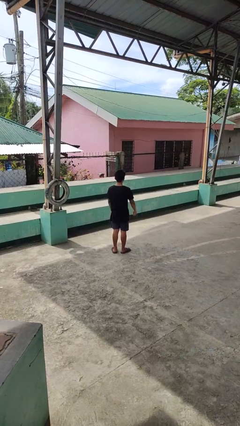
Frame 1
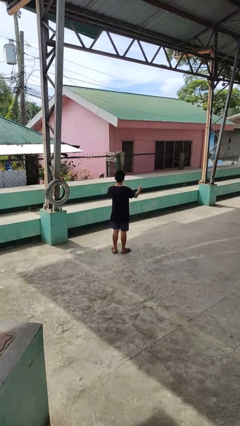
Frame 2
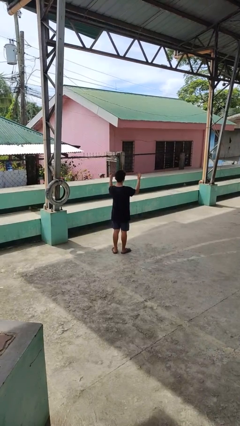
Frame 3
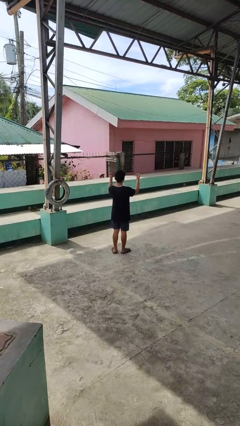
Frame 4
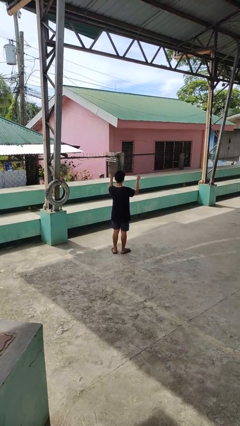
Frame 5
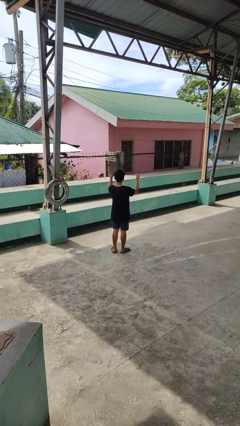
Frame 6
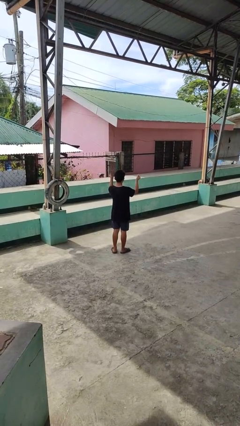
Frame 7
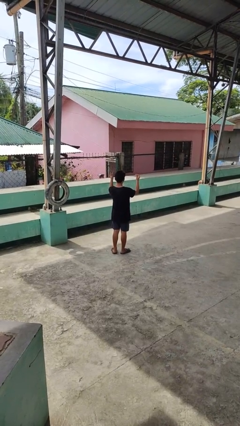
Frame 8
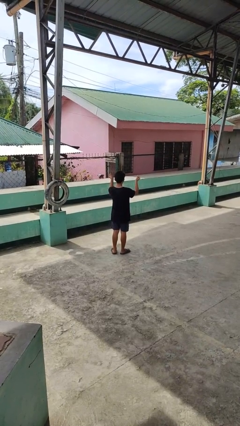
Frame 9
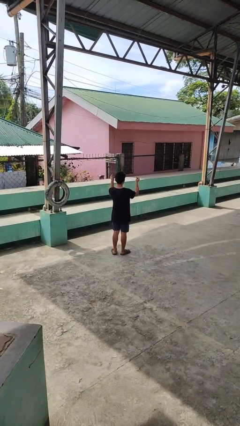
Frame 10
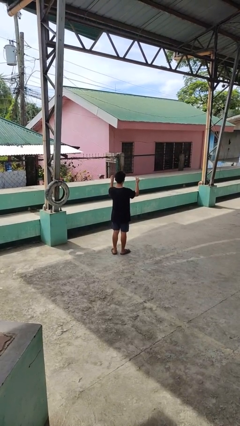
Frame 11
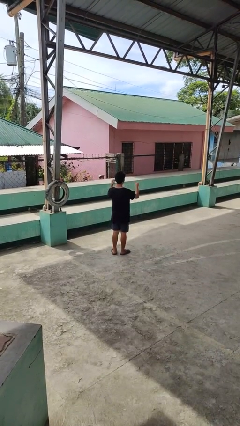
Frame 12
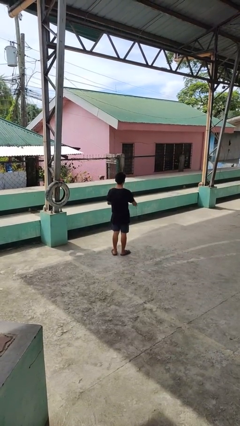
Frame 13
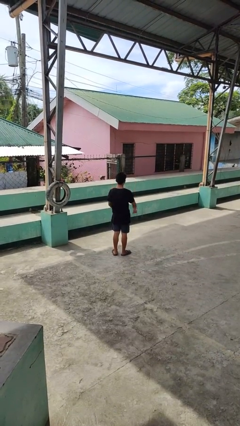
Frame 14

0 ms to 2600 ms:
person snaps fingers

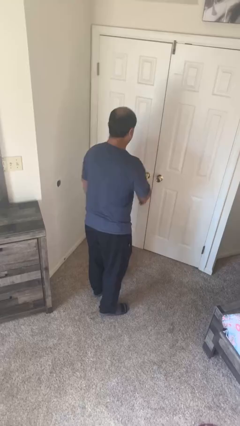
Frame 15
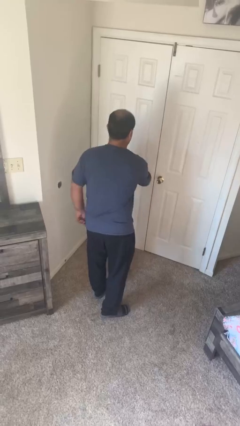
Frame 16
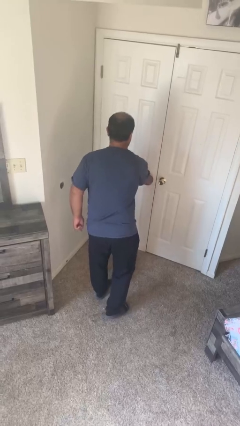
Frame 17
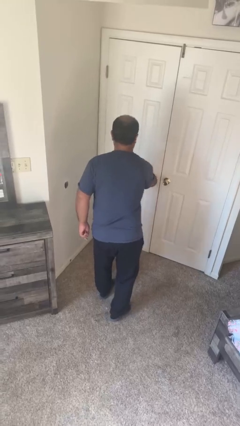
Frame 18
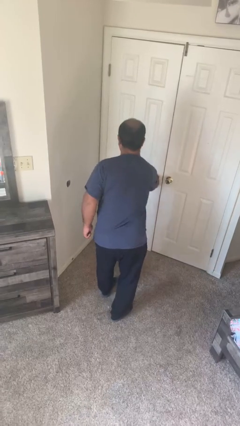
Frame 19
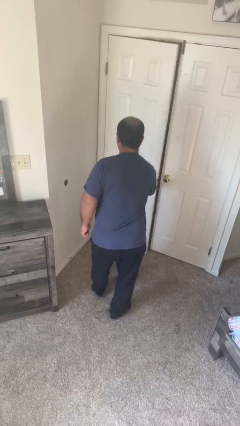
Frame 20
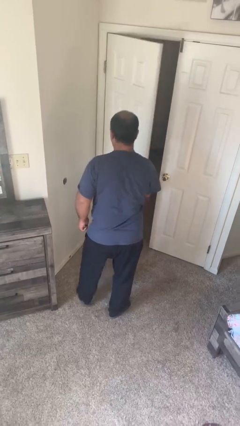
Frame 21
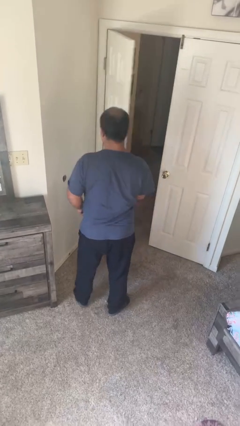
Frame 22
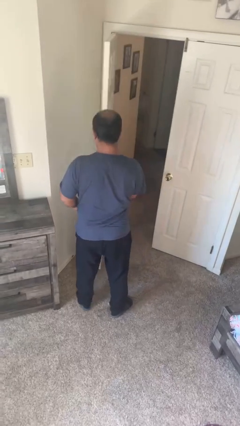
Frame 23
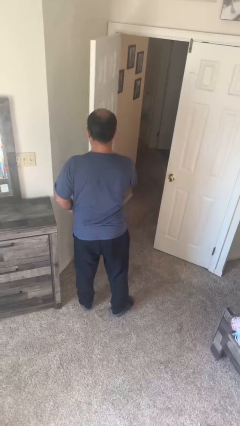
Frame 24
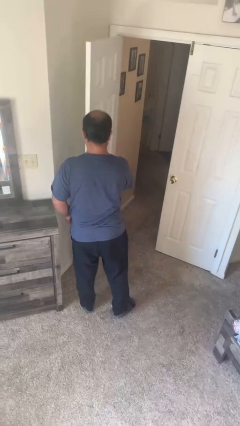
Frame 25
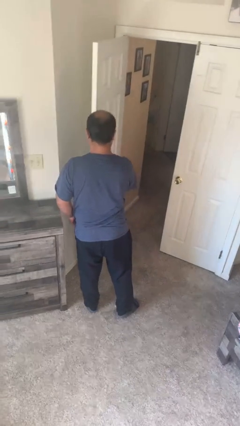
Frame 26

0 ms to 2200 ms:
person opens facility door

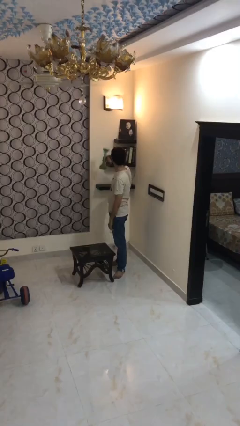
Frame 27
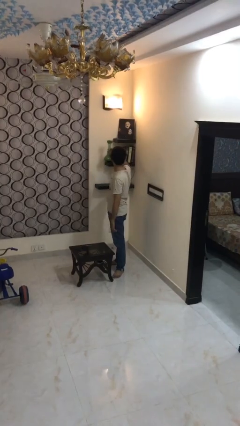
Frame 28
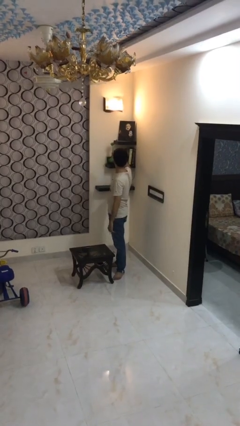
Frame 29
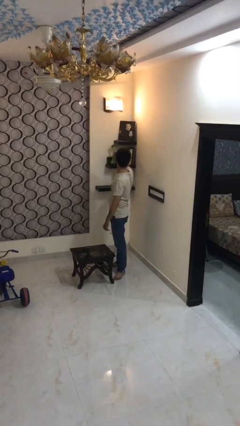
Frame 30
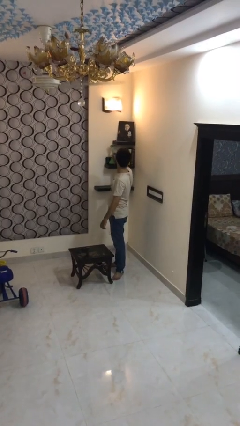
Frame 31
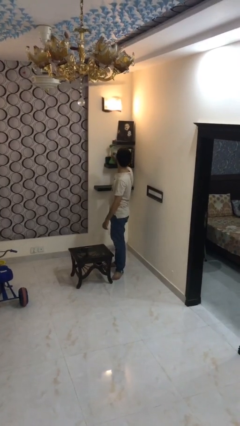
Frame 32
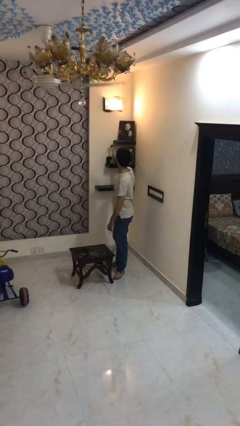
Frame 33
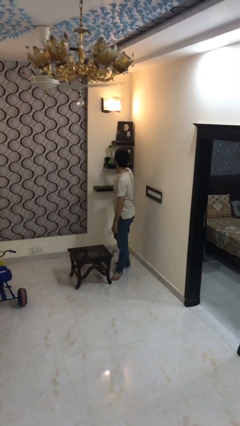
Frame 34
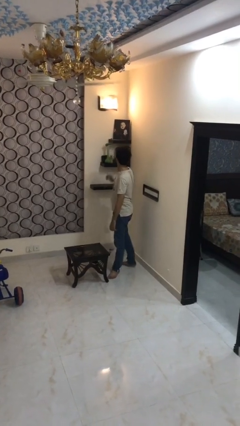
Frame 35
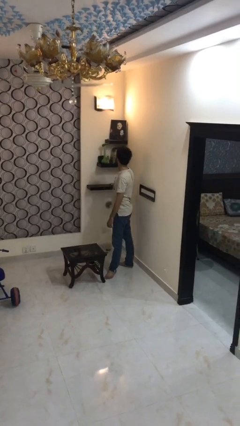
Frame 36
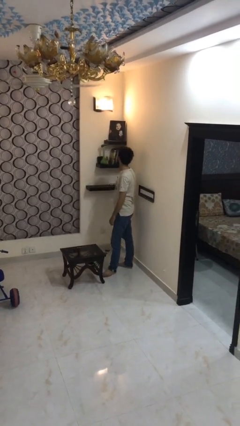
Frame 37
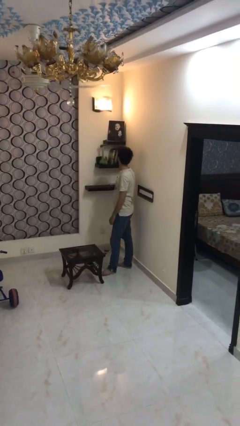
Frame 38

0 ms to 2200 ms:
person puts down object on shelf

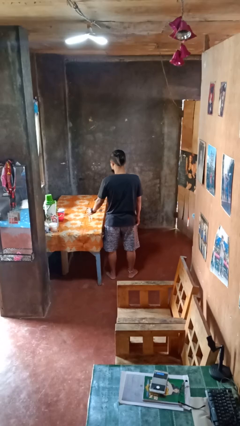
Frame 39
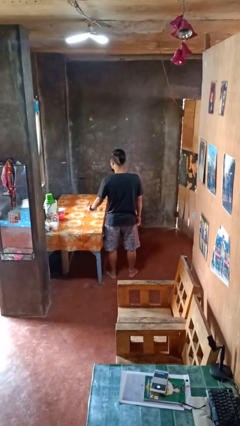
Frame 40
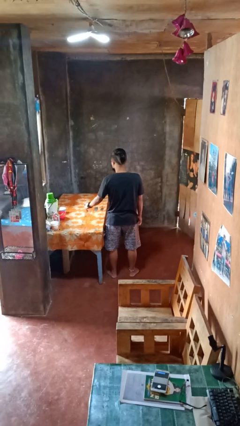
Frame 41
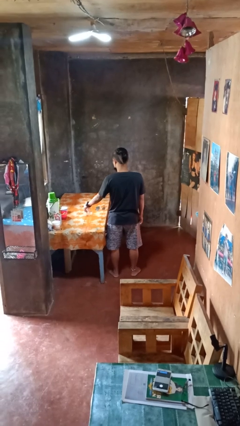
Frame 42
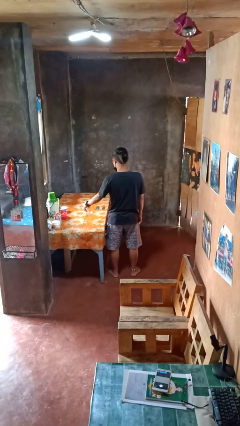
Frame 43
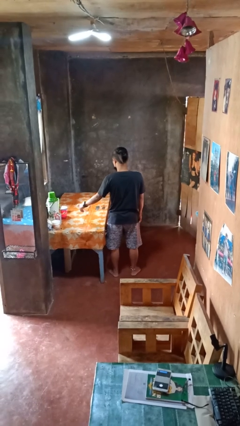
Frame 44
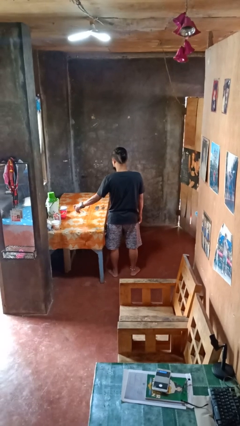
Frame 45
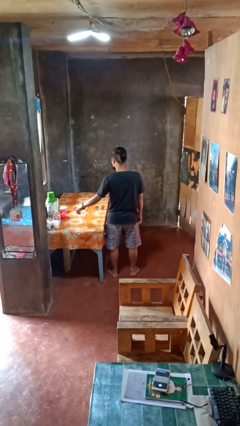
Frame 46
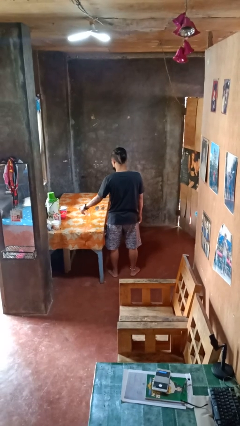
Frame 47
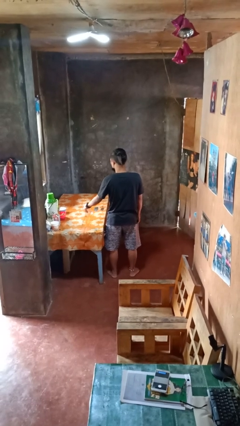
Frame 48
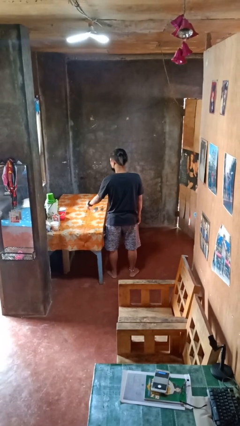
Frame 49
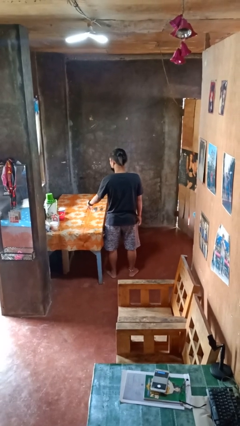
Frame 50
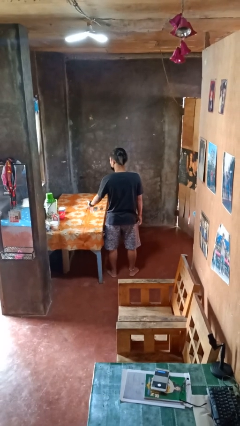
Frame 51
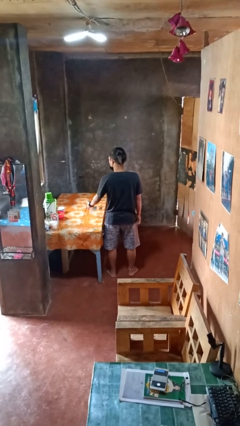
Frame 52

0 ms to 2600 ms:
person sprays from bottle

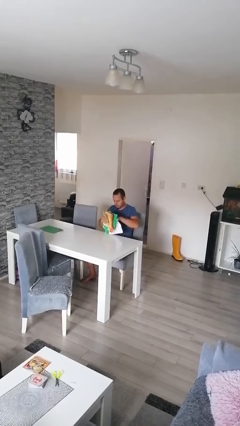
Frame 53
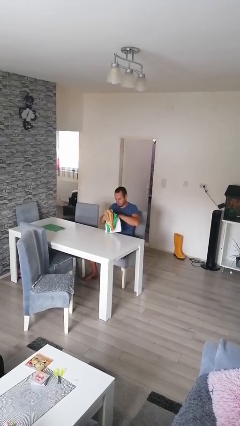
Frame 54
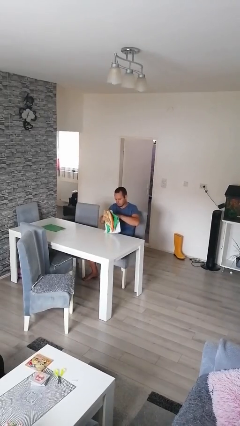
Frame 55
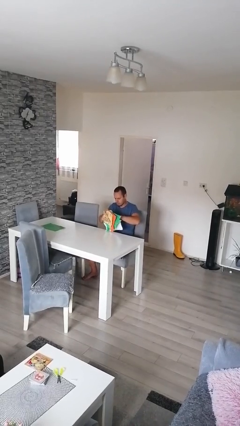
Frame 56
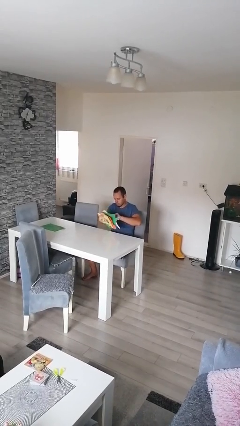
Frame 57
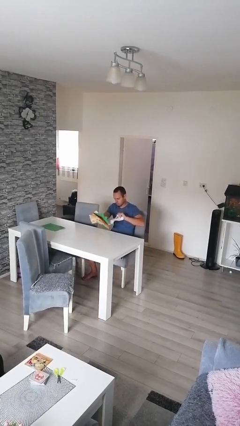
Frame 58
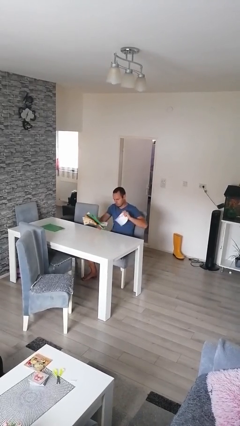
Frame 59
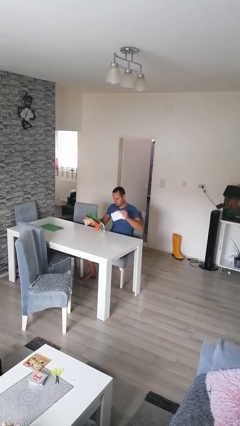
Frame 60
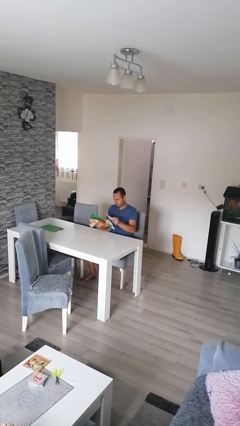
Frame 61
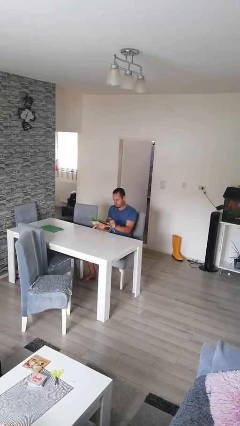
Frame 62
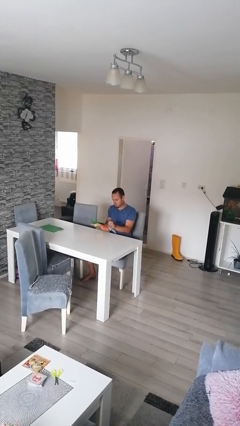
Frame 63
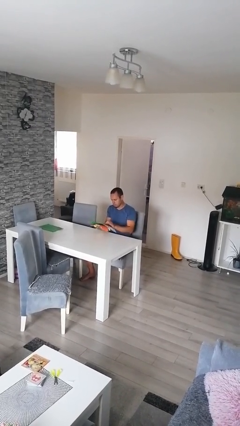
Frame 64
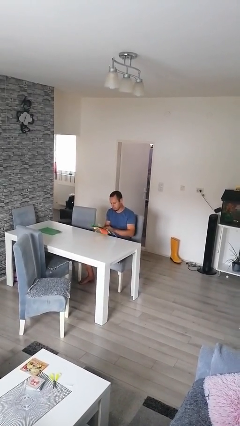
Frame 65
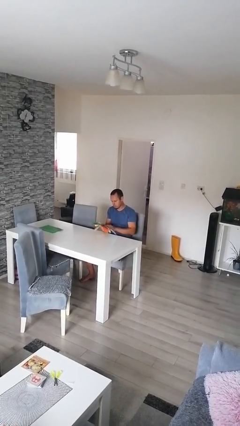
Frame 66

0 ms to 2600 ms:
person tears paper

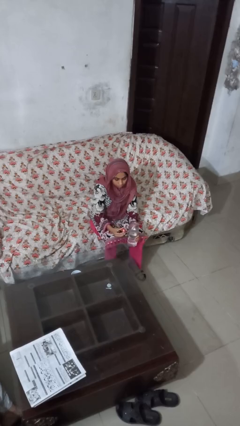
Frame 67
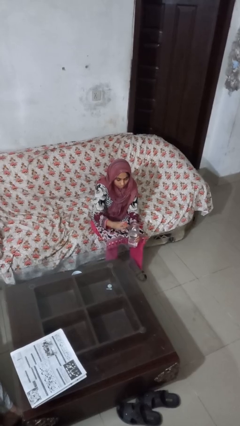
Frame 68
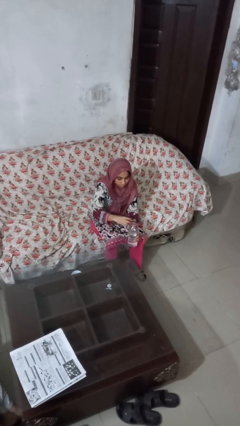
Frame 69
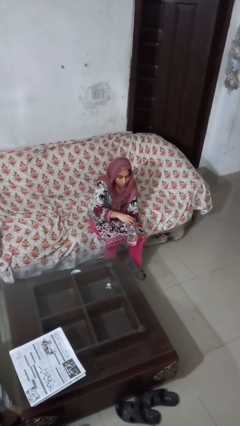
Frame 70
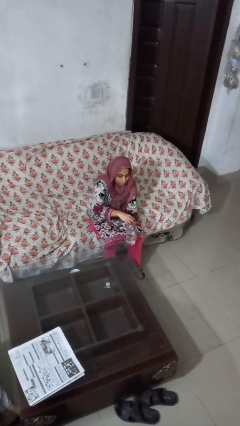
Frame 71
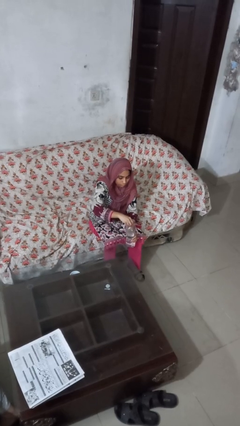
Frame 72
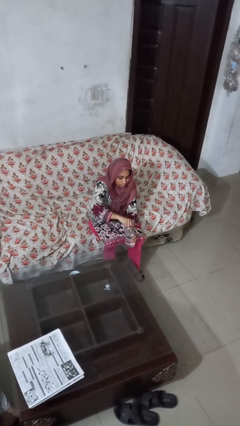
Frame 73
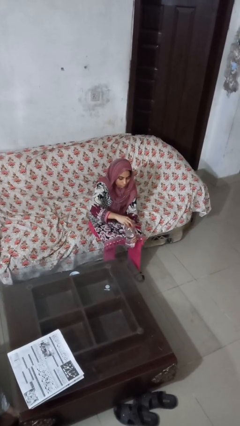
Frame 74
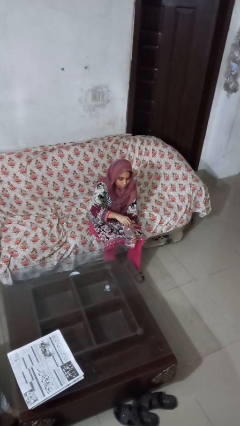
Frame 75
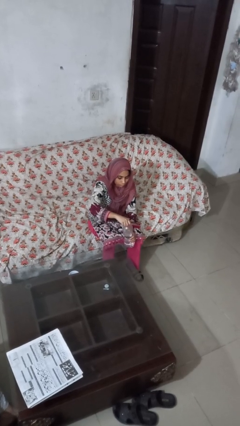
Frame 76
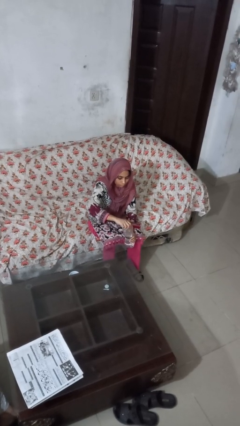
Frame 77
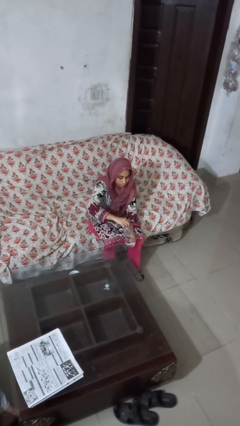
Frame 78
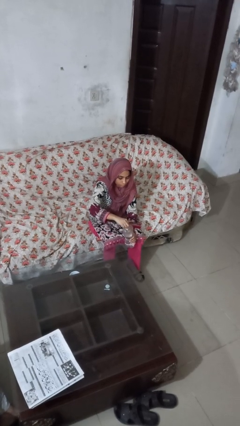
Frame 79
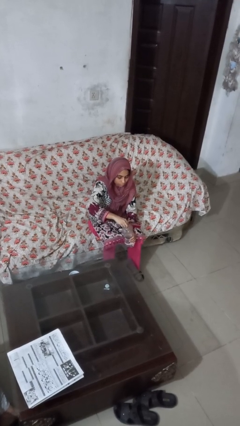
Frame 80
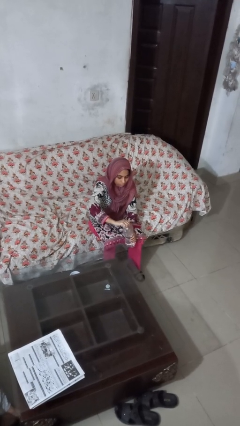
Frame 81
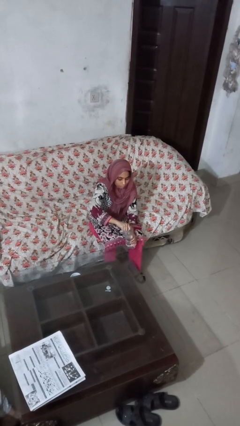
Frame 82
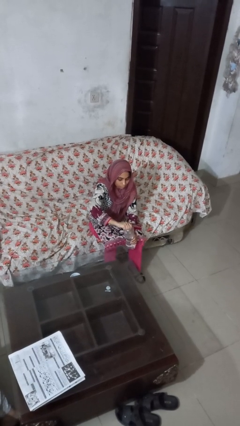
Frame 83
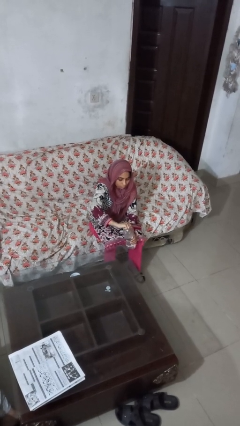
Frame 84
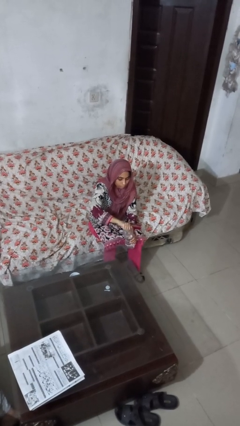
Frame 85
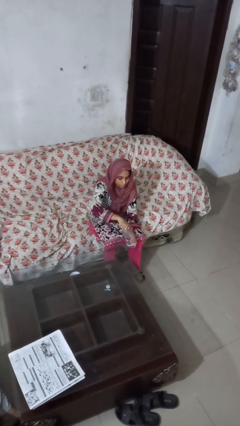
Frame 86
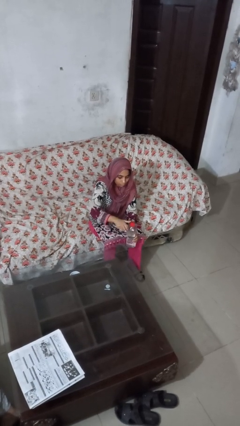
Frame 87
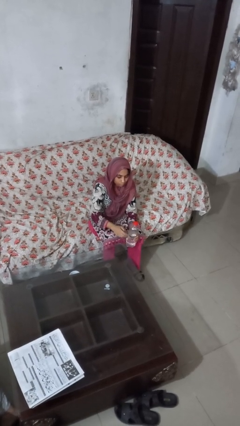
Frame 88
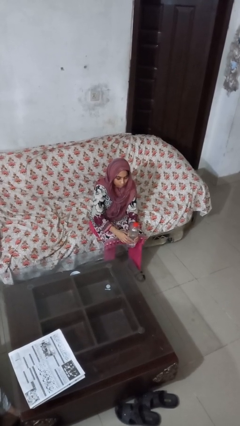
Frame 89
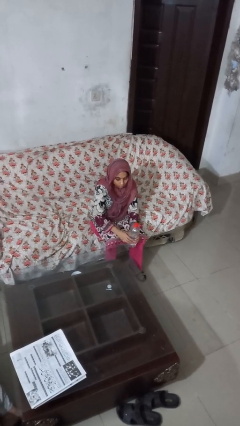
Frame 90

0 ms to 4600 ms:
person screws lid to bottle

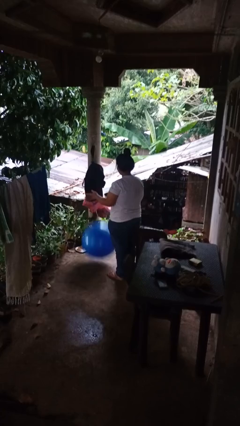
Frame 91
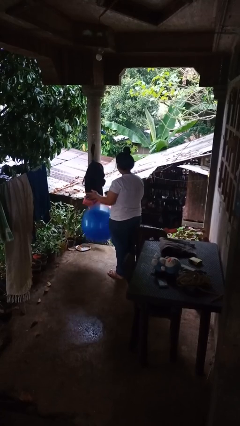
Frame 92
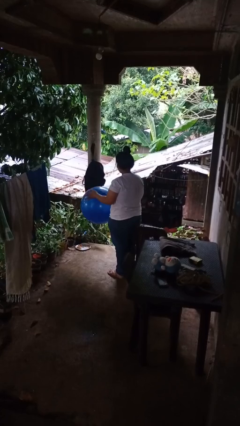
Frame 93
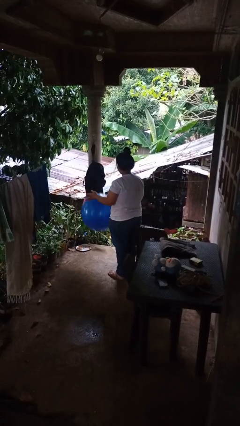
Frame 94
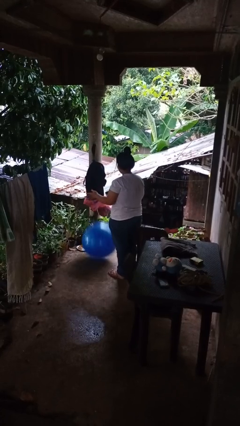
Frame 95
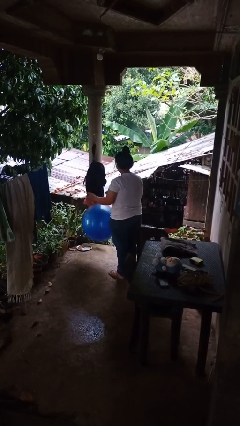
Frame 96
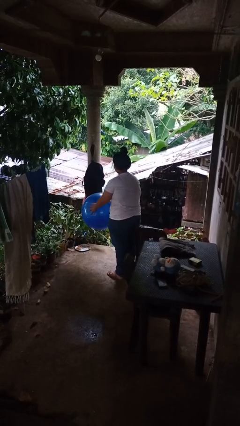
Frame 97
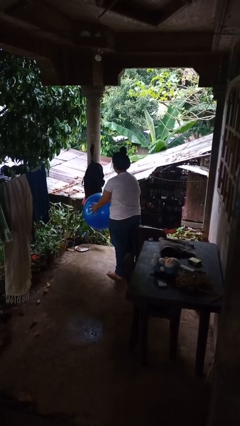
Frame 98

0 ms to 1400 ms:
person bounces ball on floor
